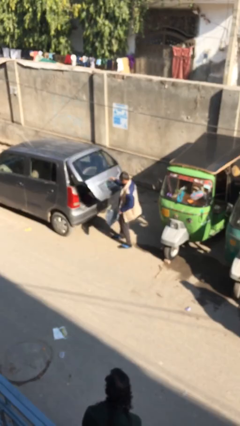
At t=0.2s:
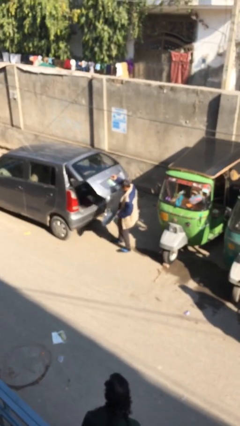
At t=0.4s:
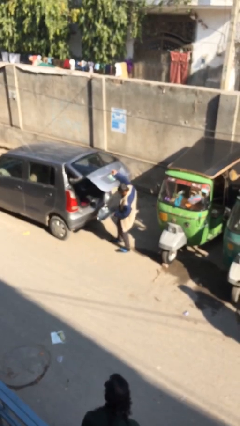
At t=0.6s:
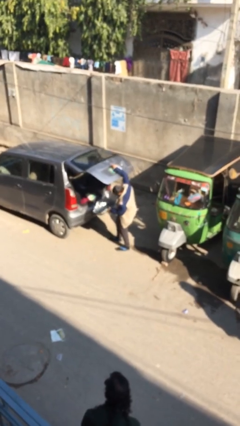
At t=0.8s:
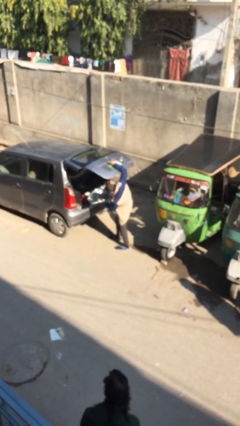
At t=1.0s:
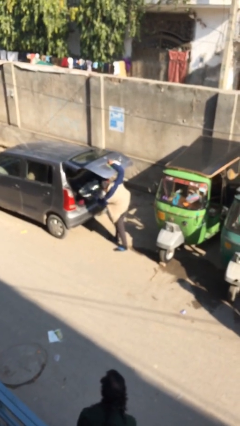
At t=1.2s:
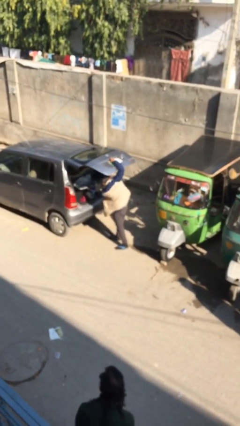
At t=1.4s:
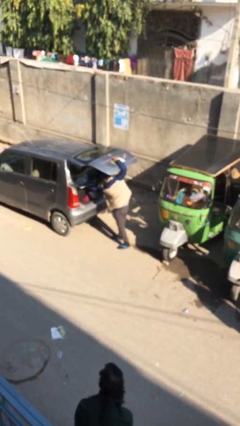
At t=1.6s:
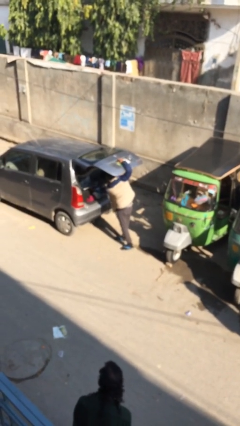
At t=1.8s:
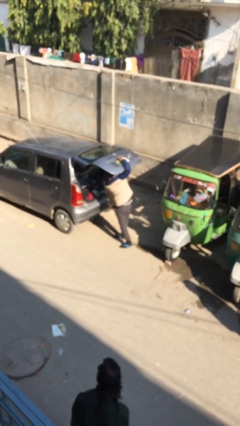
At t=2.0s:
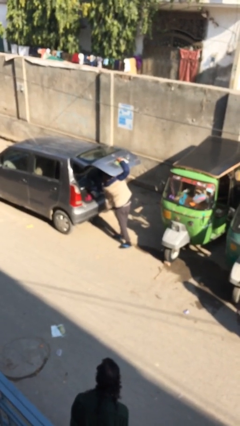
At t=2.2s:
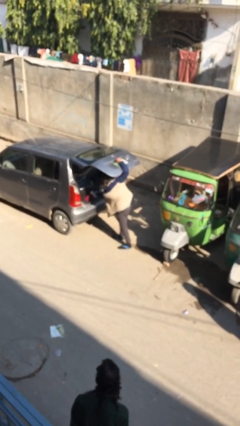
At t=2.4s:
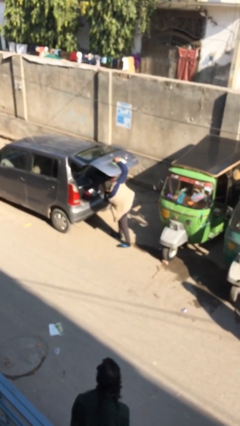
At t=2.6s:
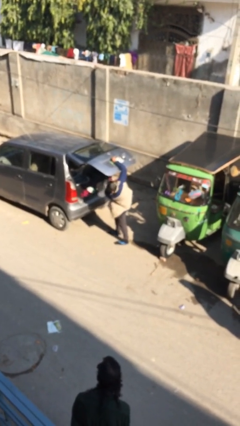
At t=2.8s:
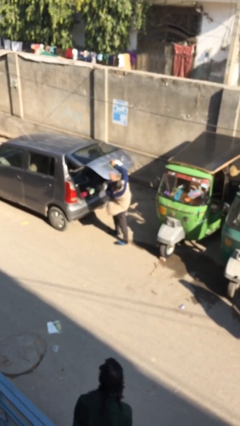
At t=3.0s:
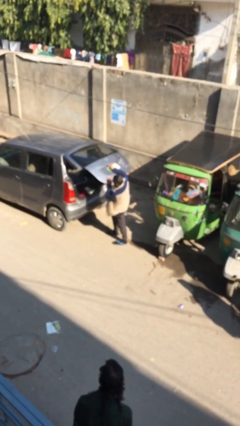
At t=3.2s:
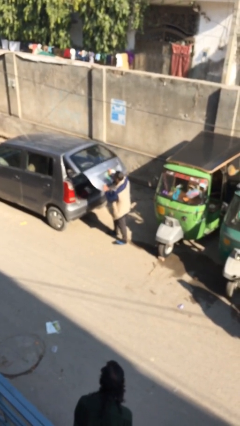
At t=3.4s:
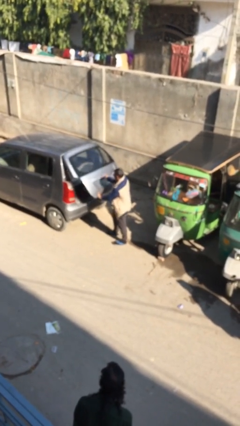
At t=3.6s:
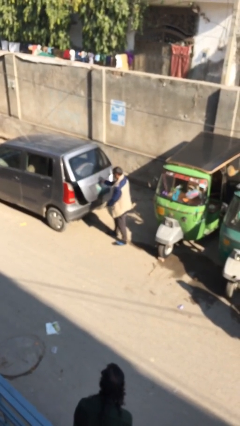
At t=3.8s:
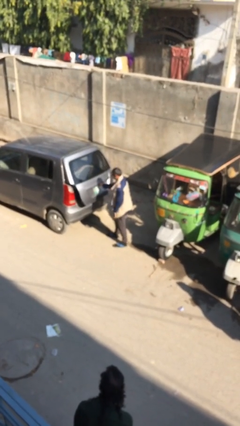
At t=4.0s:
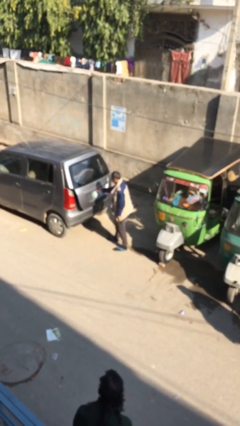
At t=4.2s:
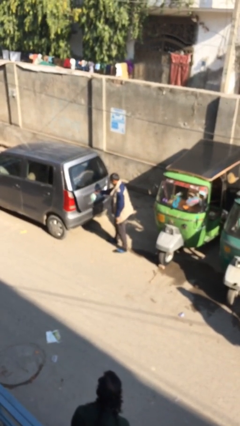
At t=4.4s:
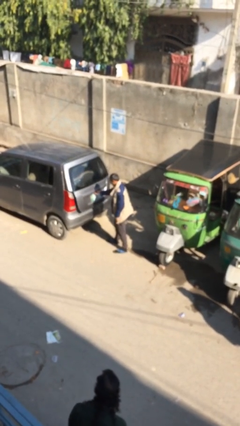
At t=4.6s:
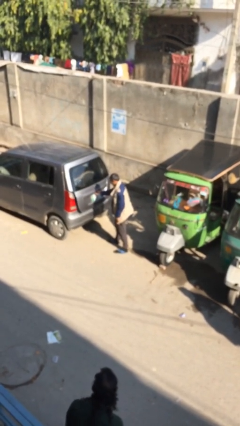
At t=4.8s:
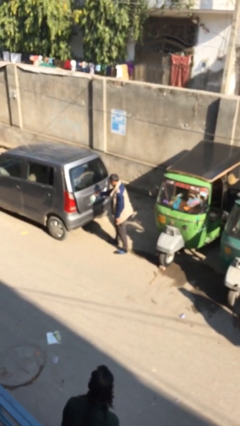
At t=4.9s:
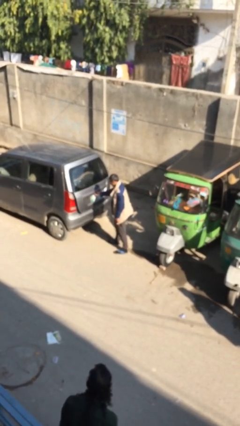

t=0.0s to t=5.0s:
person loads car

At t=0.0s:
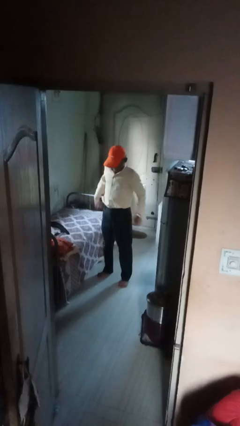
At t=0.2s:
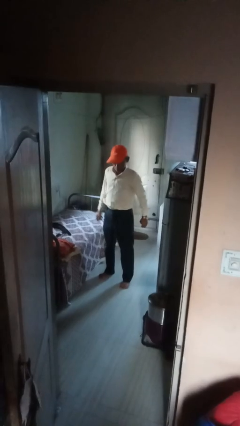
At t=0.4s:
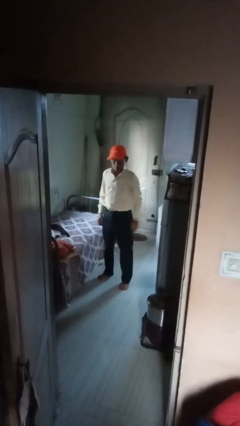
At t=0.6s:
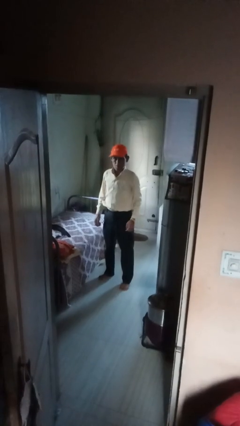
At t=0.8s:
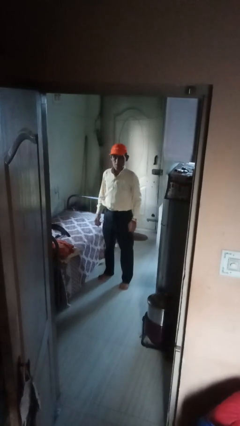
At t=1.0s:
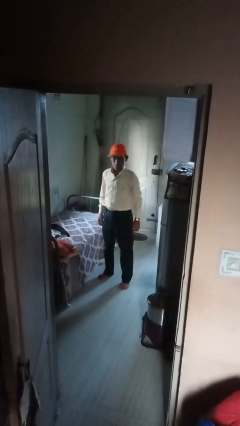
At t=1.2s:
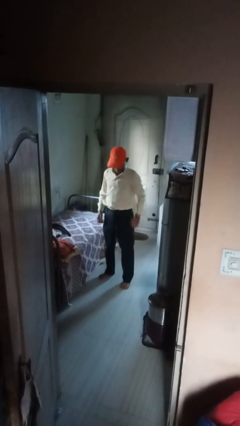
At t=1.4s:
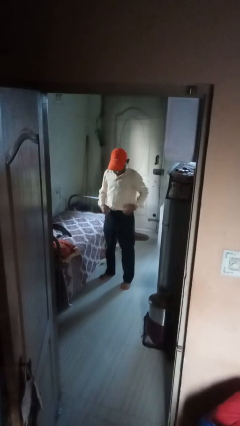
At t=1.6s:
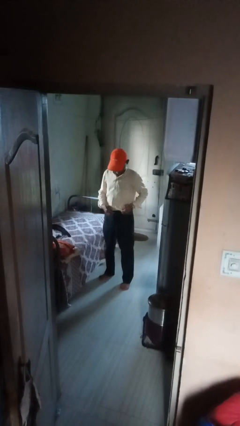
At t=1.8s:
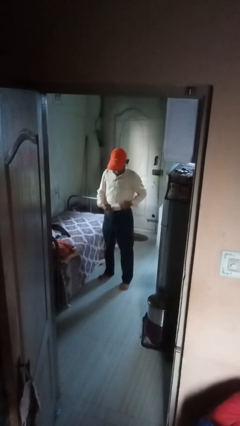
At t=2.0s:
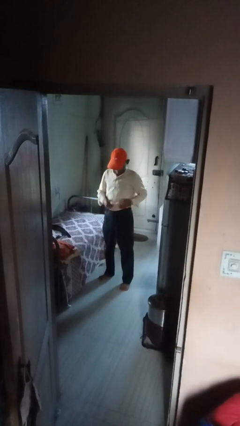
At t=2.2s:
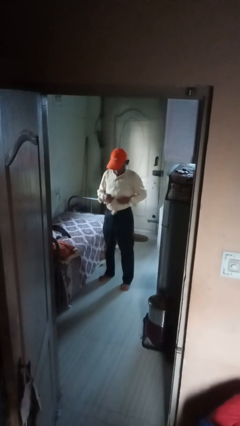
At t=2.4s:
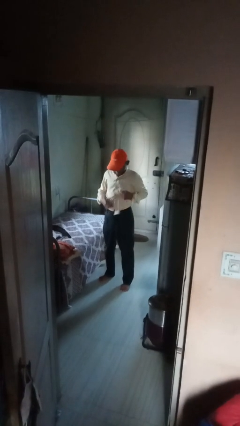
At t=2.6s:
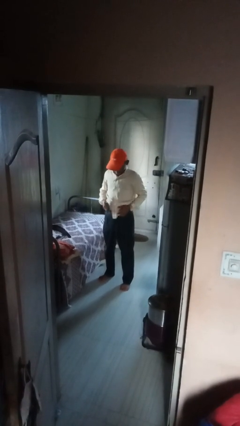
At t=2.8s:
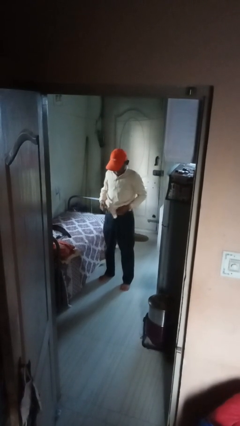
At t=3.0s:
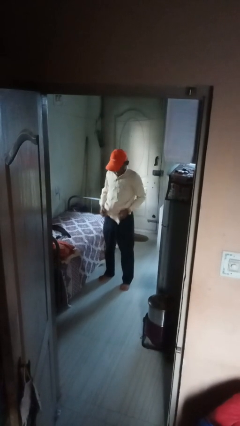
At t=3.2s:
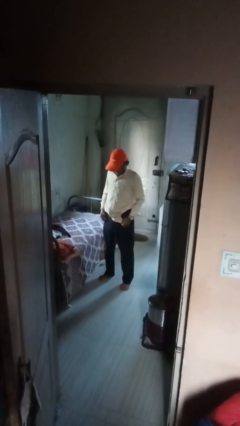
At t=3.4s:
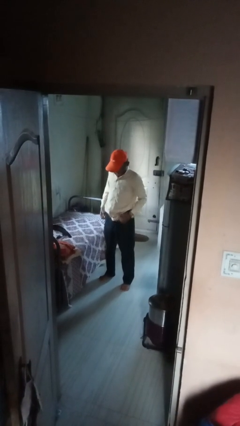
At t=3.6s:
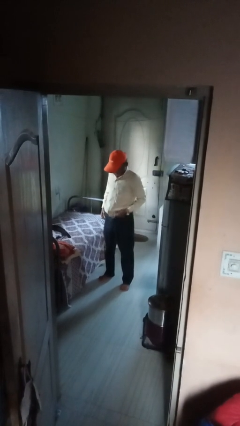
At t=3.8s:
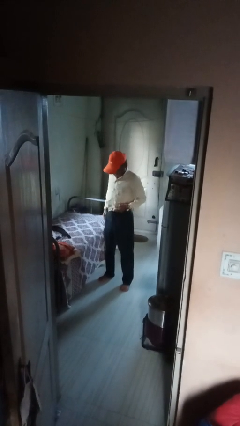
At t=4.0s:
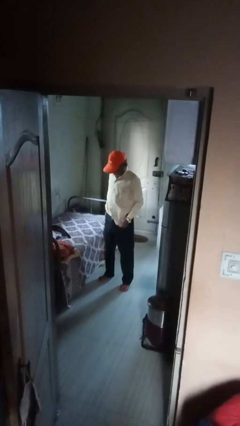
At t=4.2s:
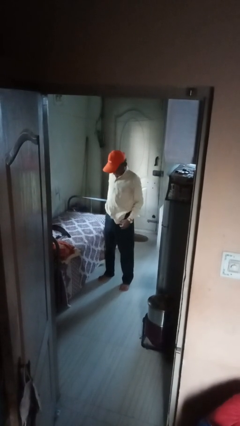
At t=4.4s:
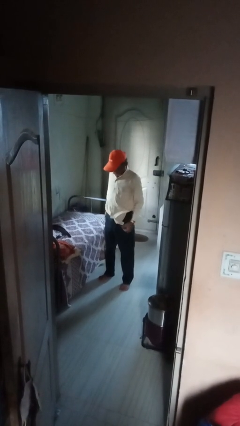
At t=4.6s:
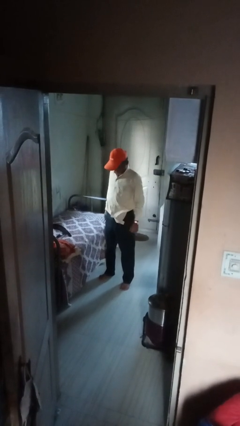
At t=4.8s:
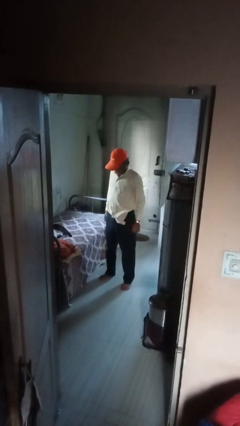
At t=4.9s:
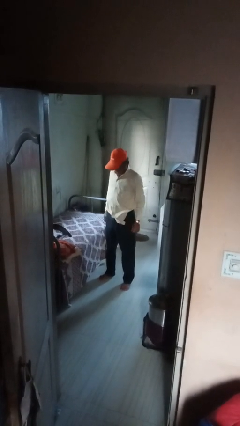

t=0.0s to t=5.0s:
person untucks shirt

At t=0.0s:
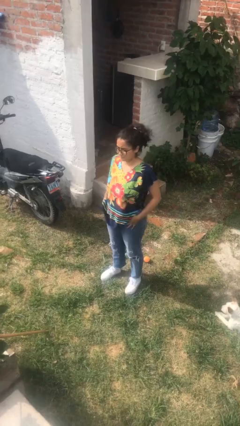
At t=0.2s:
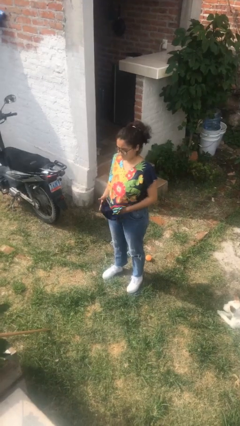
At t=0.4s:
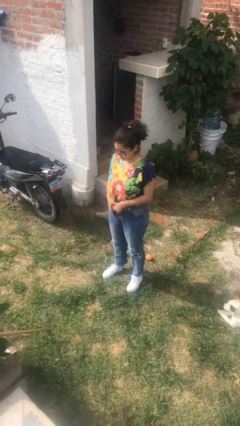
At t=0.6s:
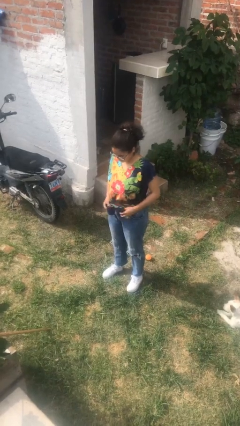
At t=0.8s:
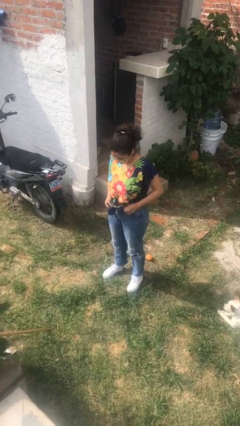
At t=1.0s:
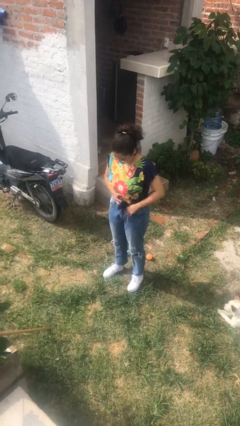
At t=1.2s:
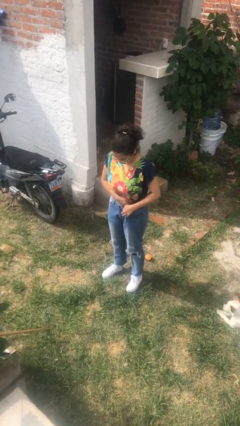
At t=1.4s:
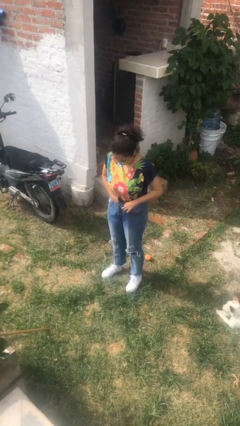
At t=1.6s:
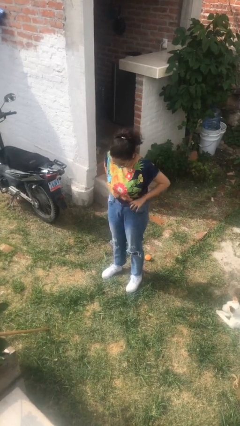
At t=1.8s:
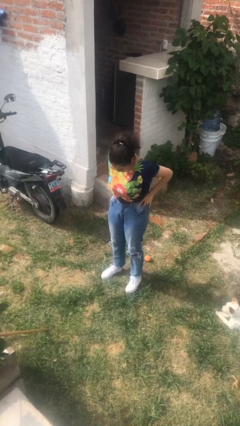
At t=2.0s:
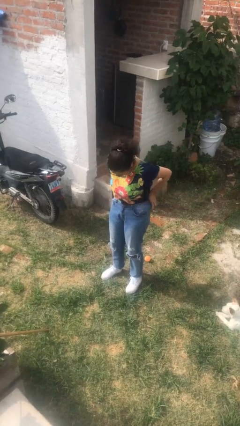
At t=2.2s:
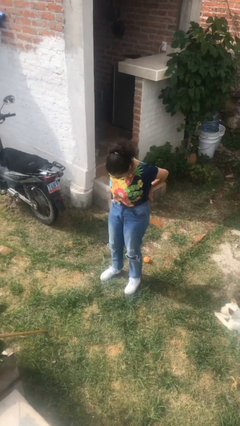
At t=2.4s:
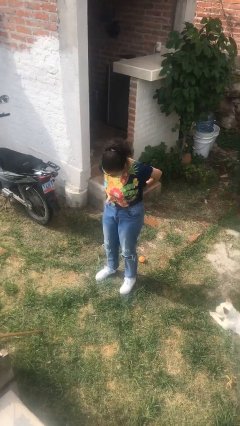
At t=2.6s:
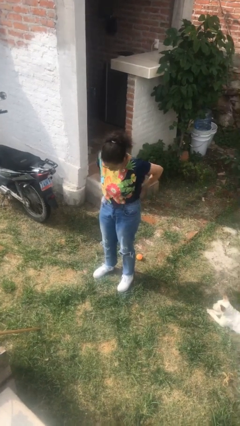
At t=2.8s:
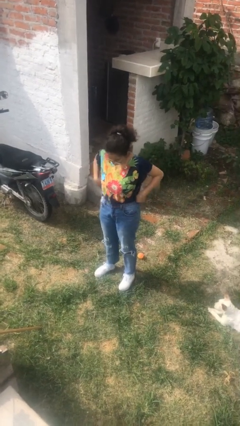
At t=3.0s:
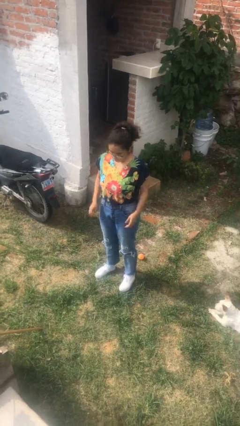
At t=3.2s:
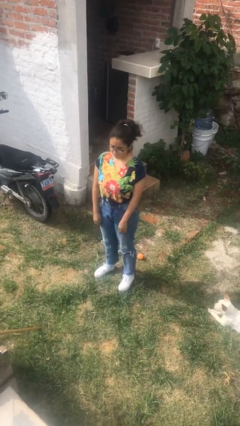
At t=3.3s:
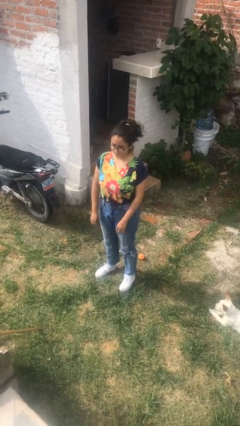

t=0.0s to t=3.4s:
person tucks in shirt

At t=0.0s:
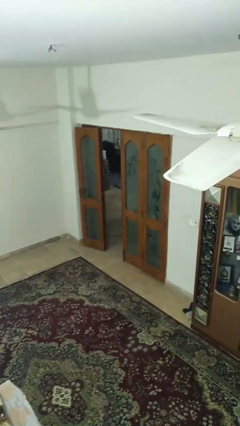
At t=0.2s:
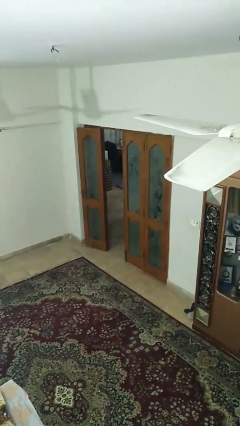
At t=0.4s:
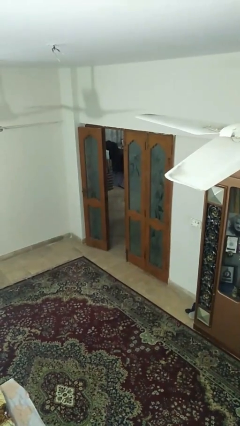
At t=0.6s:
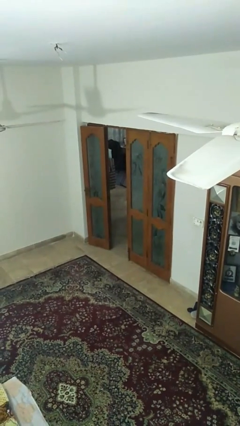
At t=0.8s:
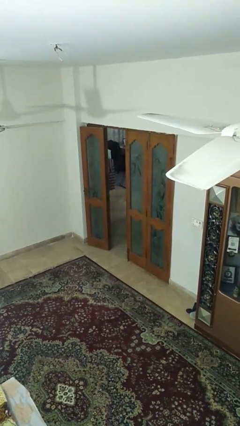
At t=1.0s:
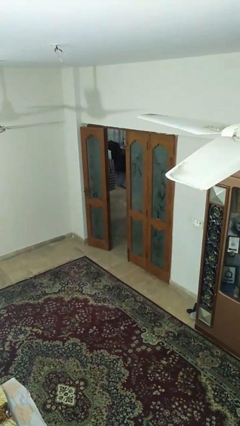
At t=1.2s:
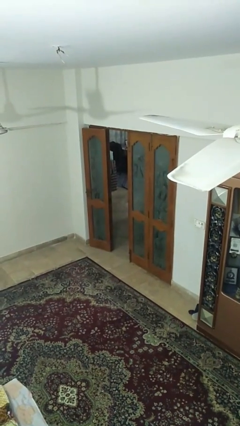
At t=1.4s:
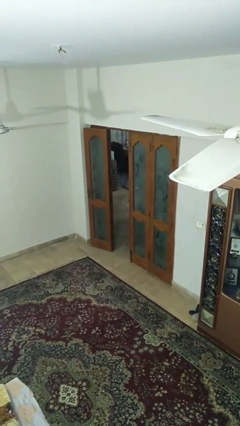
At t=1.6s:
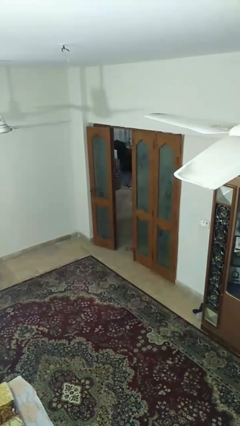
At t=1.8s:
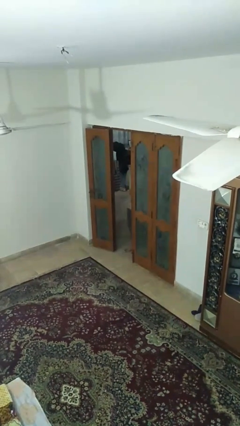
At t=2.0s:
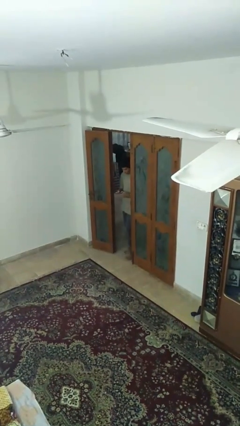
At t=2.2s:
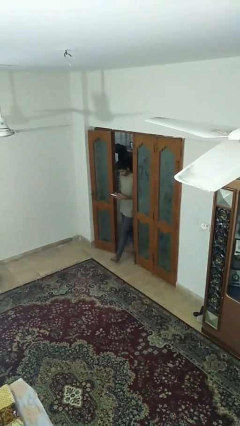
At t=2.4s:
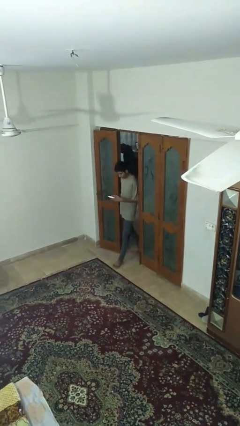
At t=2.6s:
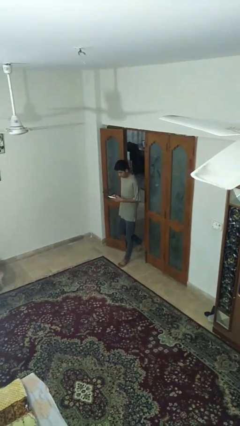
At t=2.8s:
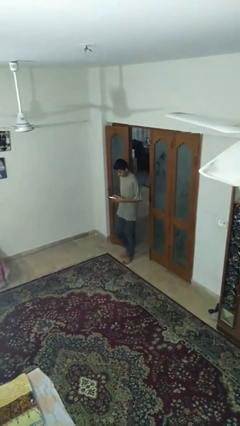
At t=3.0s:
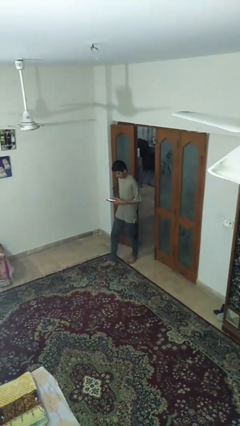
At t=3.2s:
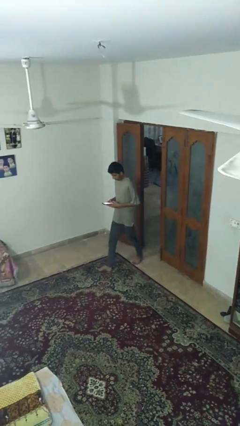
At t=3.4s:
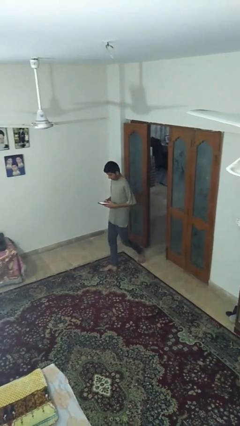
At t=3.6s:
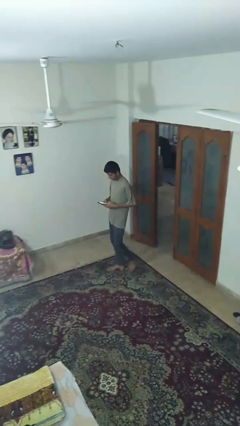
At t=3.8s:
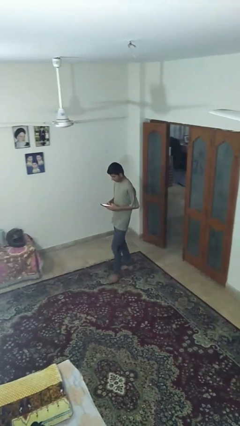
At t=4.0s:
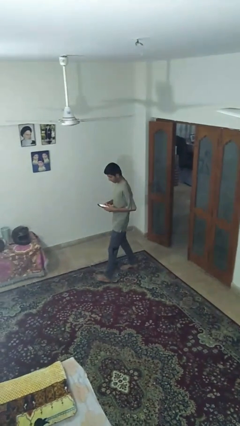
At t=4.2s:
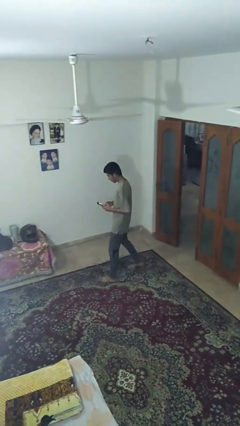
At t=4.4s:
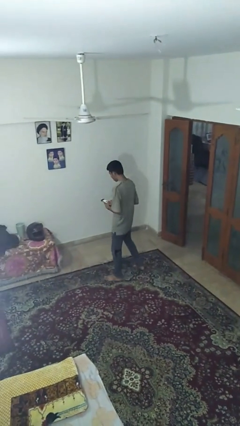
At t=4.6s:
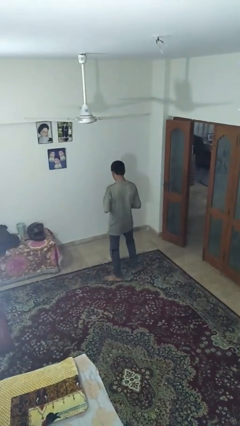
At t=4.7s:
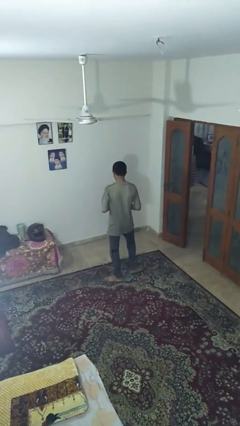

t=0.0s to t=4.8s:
person enters scene through structure
